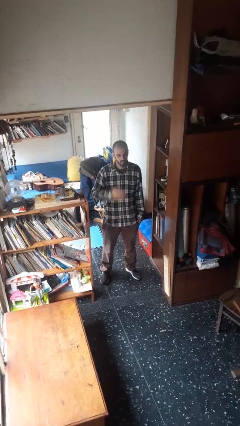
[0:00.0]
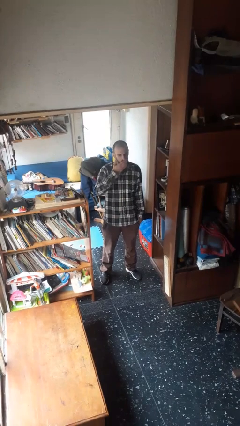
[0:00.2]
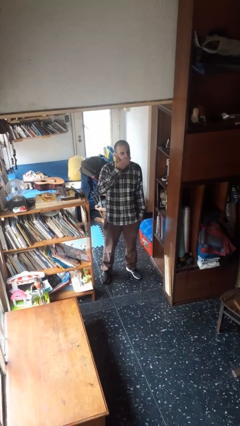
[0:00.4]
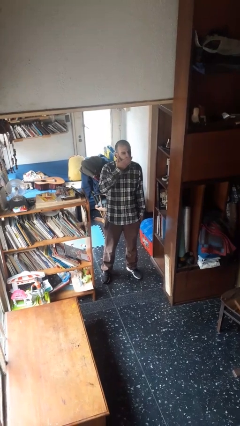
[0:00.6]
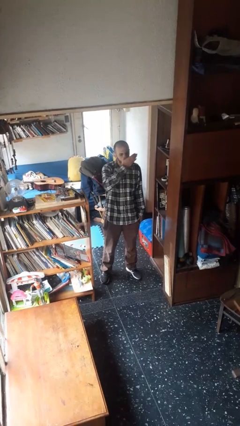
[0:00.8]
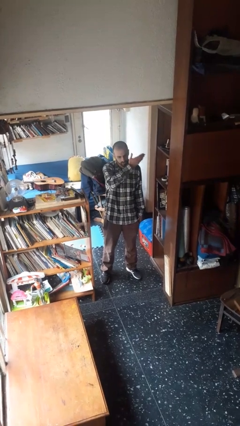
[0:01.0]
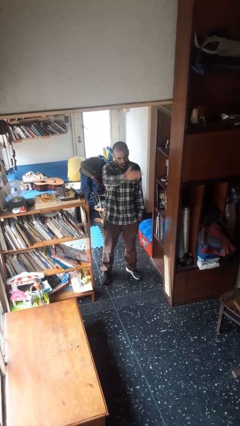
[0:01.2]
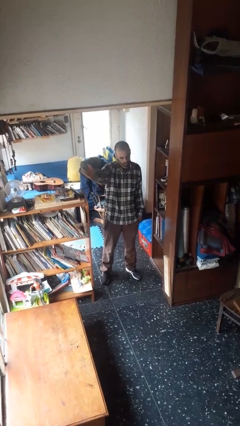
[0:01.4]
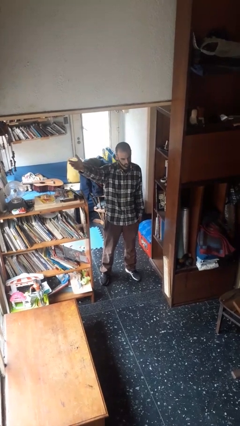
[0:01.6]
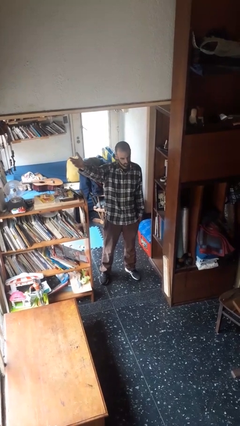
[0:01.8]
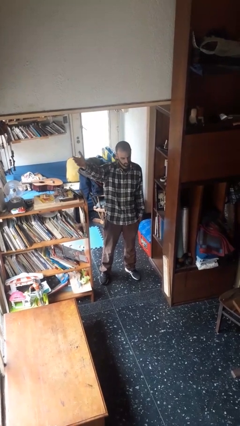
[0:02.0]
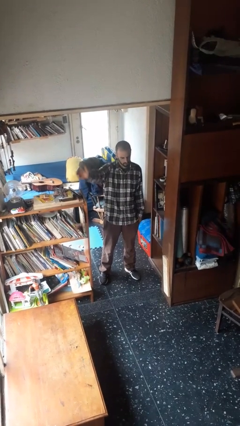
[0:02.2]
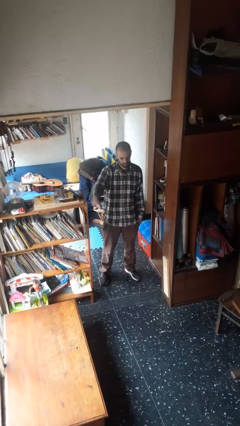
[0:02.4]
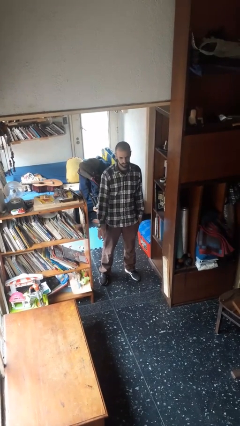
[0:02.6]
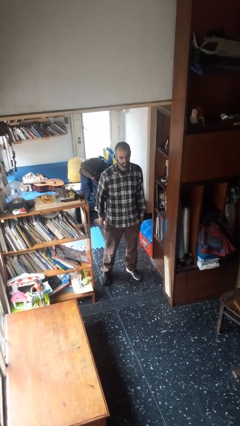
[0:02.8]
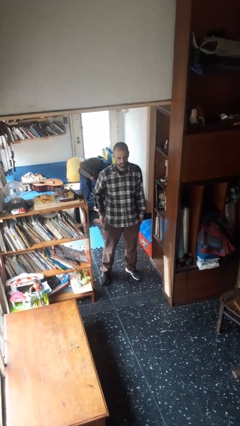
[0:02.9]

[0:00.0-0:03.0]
person gestures blow kiss

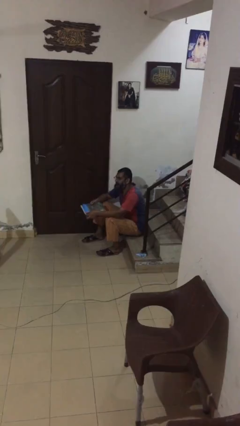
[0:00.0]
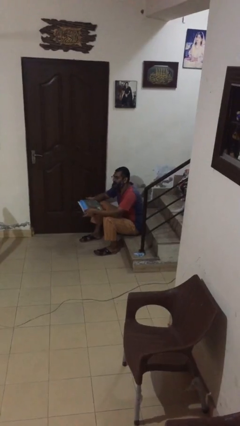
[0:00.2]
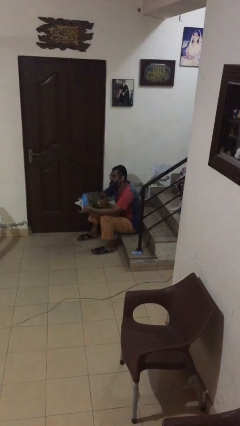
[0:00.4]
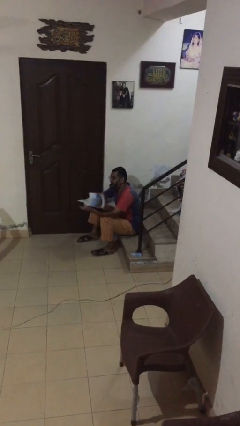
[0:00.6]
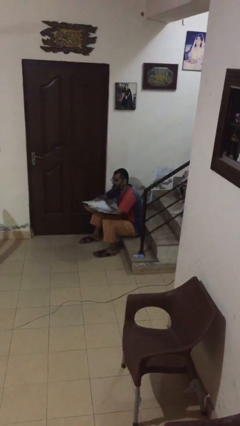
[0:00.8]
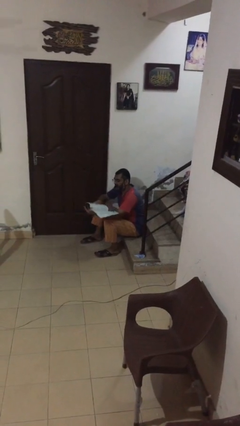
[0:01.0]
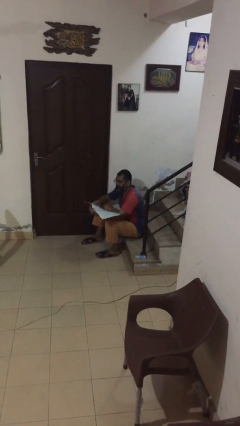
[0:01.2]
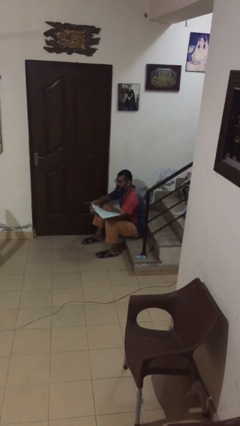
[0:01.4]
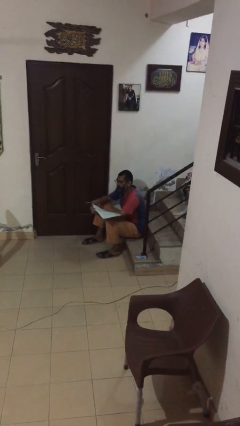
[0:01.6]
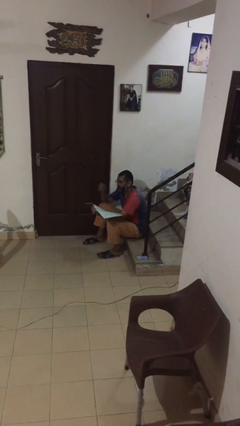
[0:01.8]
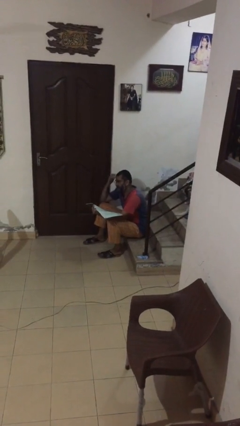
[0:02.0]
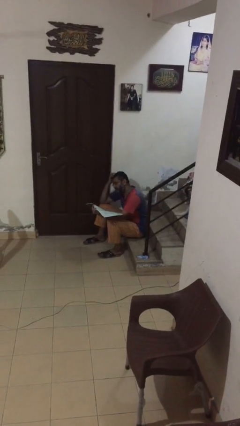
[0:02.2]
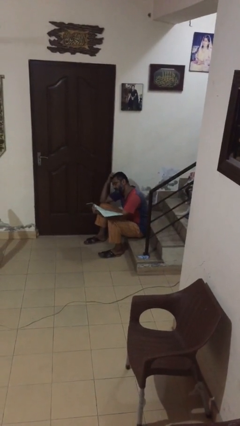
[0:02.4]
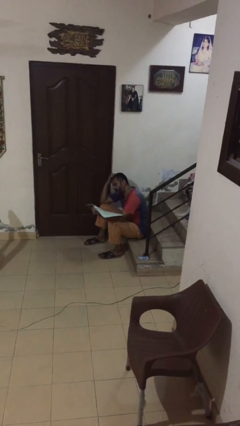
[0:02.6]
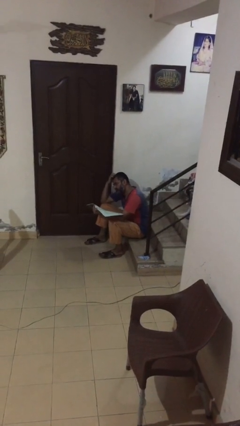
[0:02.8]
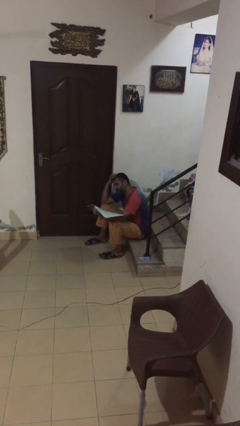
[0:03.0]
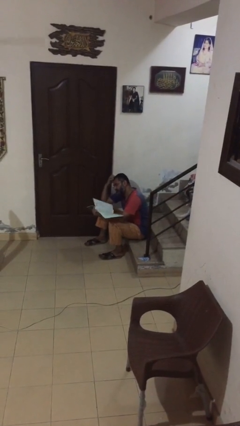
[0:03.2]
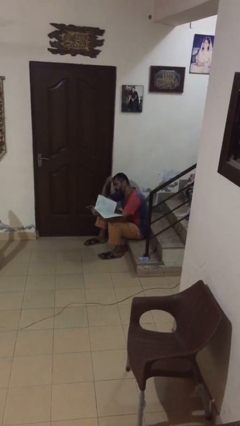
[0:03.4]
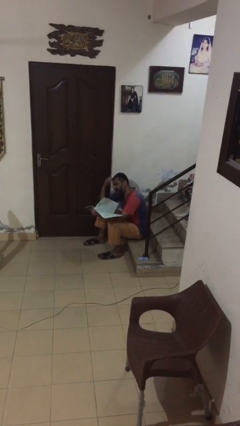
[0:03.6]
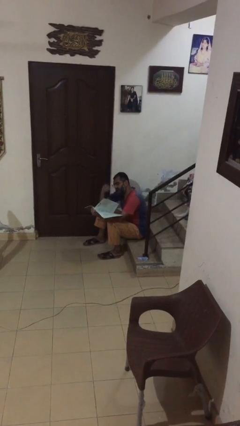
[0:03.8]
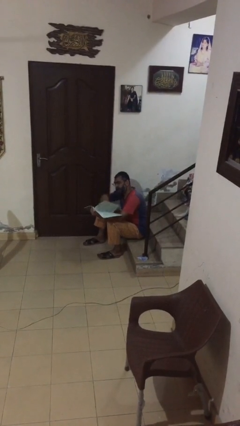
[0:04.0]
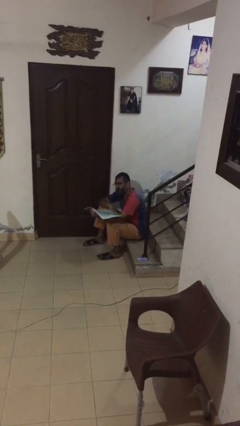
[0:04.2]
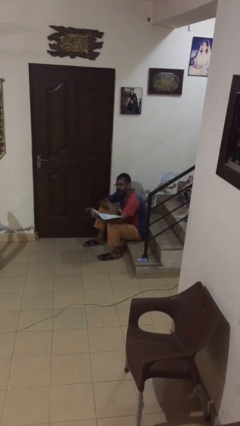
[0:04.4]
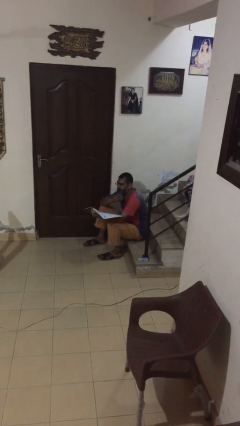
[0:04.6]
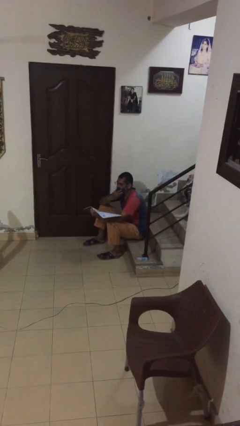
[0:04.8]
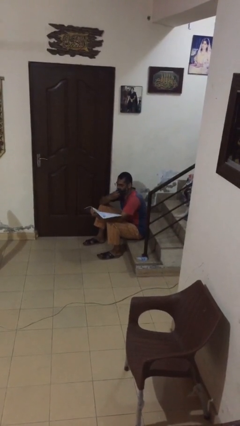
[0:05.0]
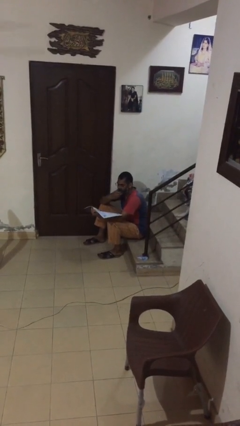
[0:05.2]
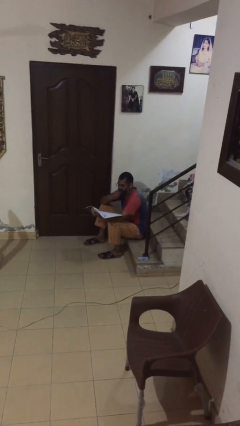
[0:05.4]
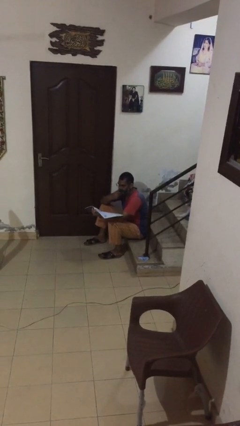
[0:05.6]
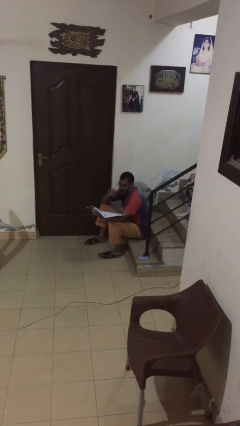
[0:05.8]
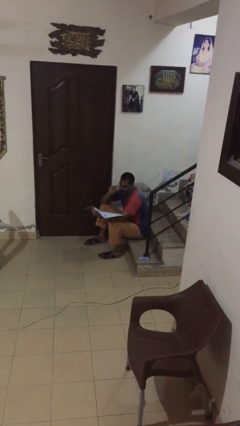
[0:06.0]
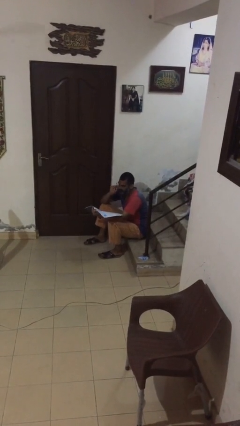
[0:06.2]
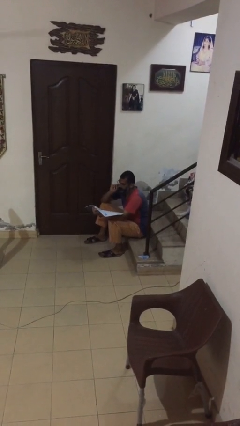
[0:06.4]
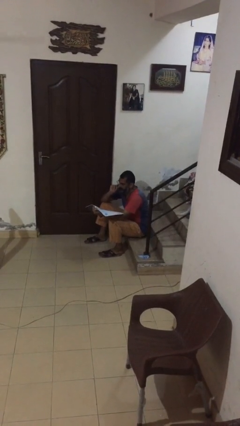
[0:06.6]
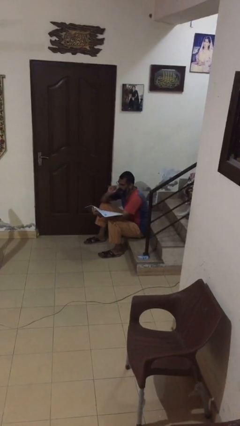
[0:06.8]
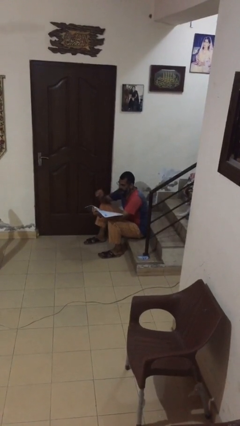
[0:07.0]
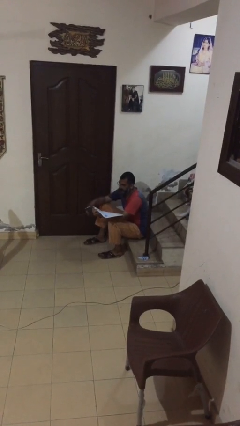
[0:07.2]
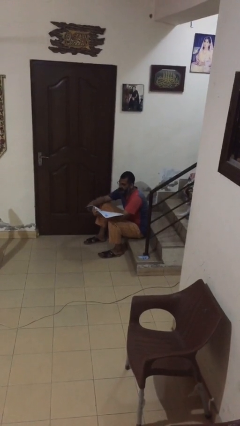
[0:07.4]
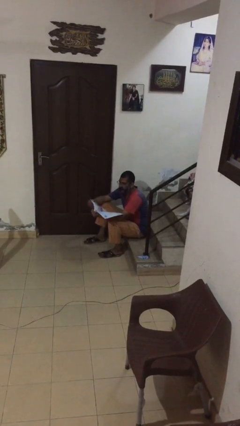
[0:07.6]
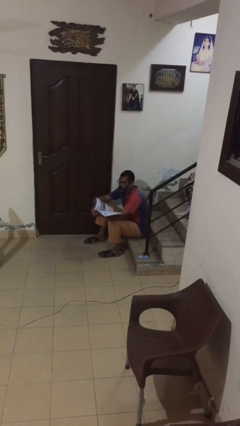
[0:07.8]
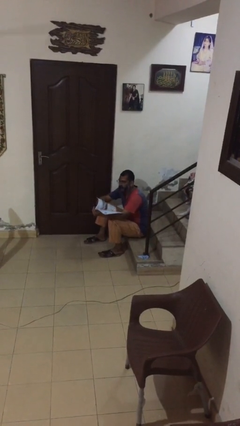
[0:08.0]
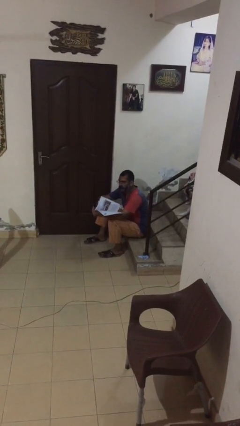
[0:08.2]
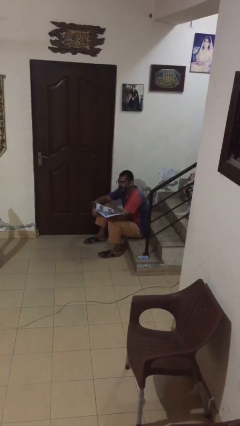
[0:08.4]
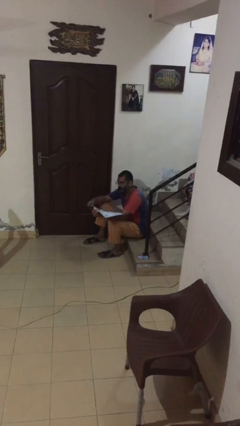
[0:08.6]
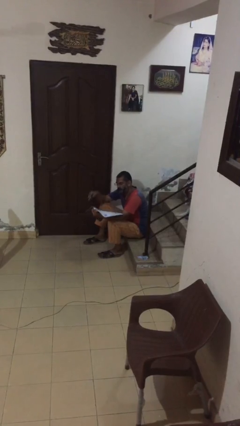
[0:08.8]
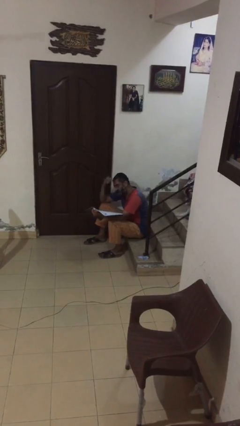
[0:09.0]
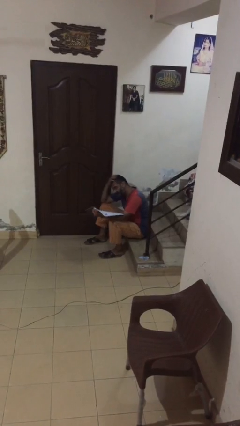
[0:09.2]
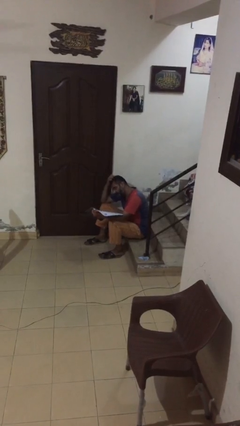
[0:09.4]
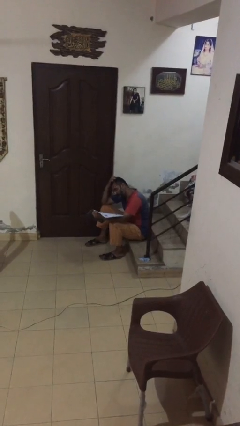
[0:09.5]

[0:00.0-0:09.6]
person reads document

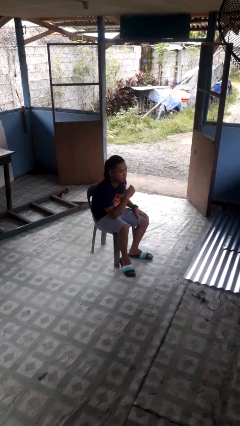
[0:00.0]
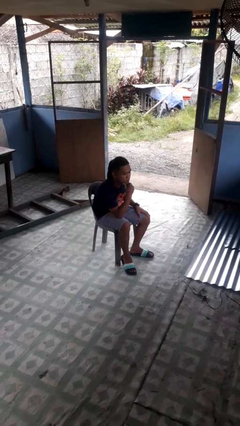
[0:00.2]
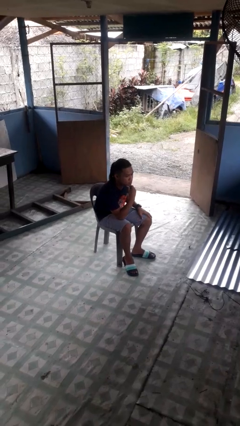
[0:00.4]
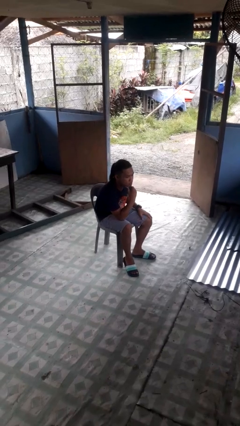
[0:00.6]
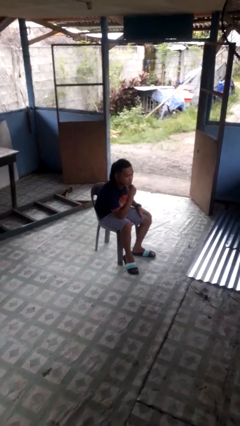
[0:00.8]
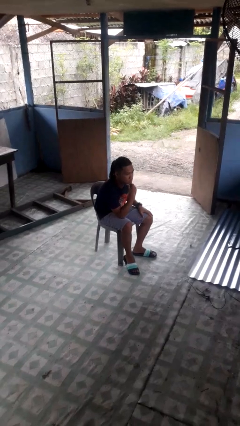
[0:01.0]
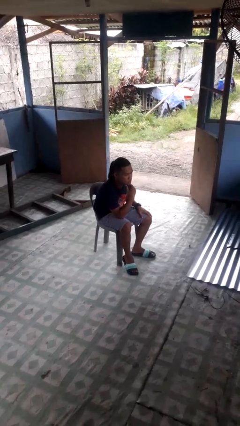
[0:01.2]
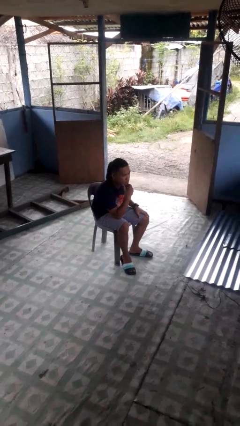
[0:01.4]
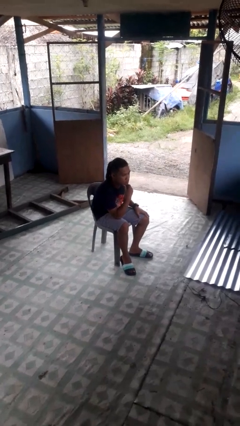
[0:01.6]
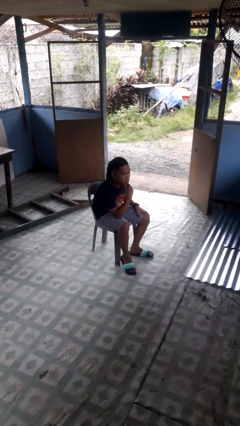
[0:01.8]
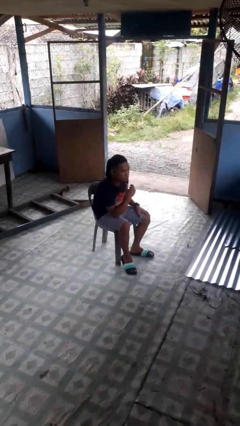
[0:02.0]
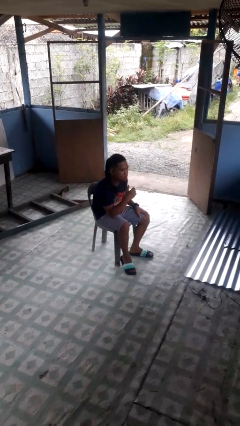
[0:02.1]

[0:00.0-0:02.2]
person strokes chin

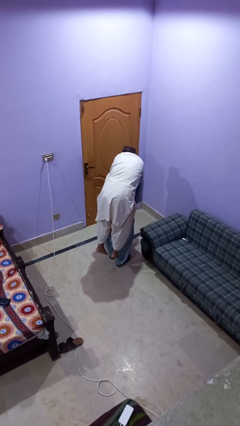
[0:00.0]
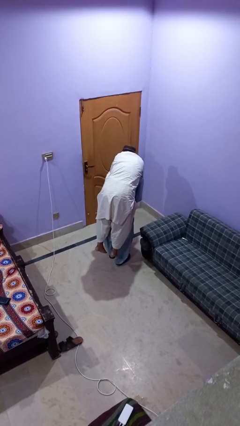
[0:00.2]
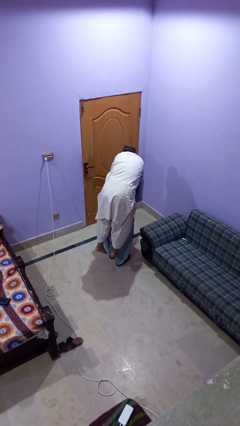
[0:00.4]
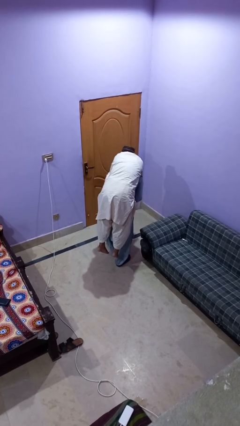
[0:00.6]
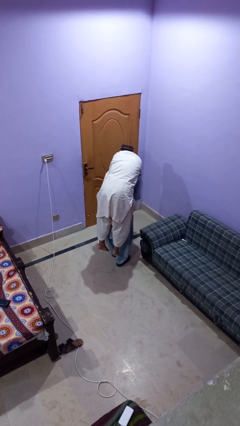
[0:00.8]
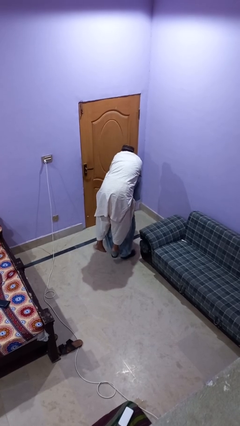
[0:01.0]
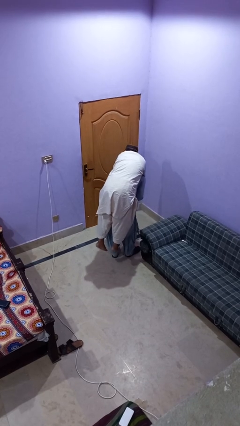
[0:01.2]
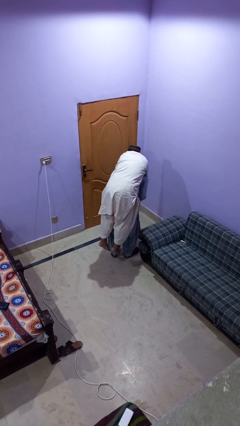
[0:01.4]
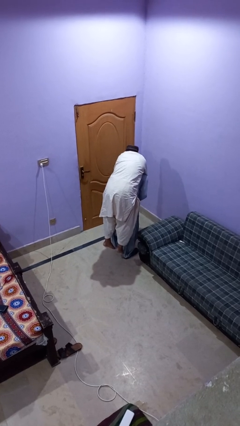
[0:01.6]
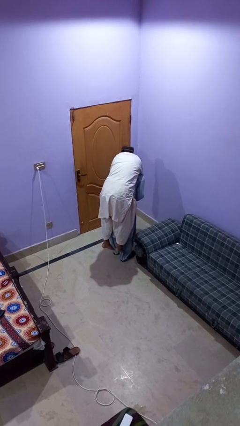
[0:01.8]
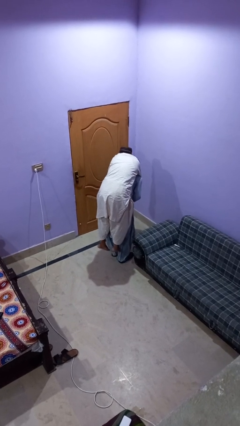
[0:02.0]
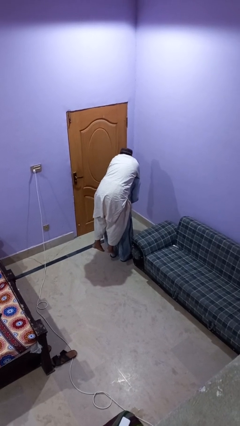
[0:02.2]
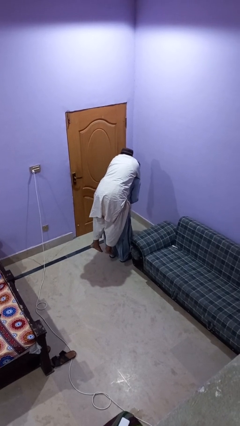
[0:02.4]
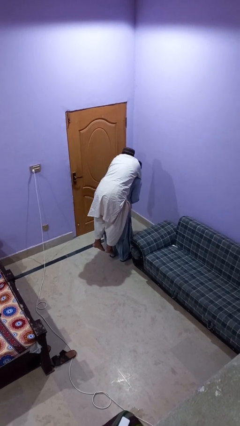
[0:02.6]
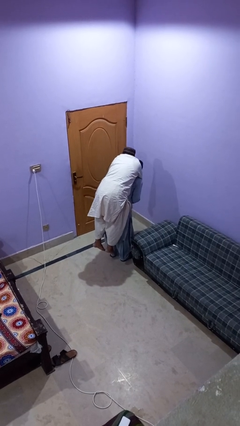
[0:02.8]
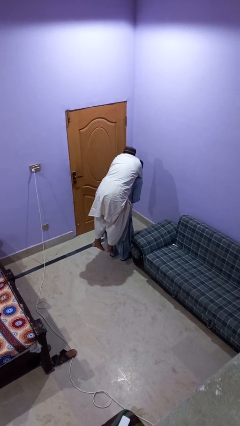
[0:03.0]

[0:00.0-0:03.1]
person carries person on back
